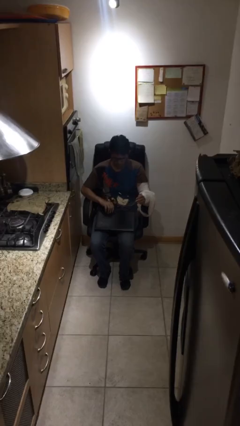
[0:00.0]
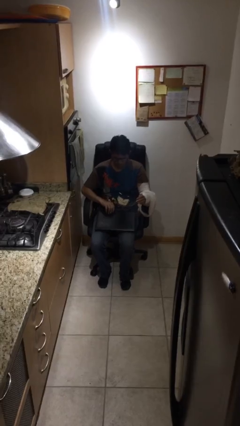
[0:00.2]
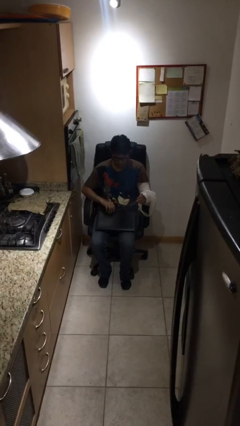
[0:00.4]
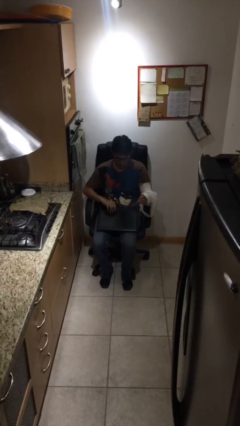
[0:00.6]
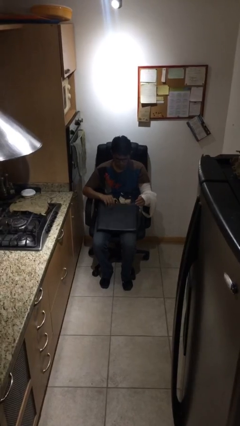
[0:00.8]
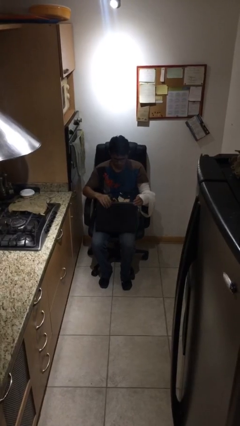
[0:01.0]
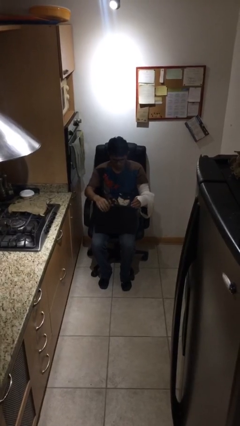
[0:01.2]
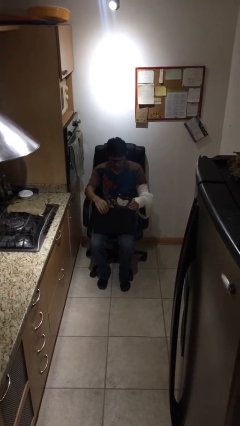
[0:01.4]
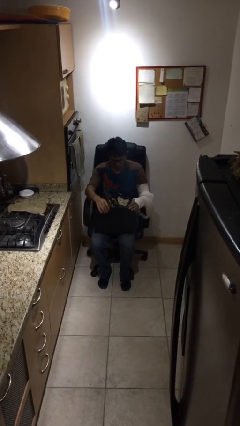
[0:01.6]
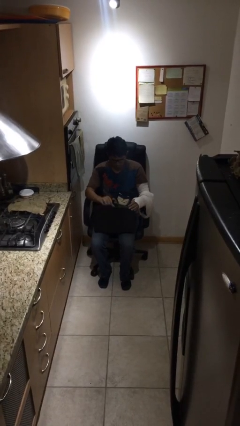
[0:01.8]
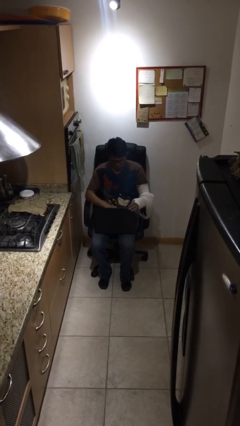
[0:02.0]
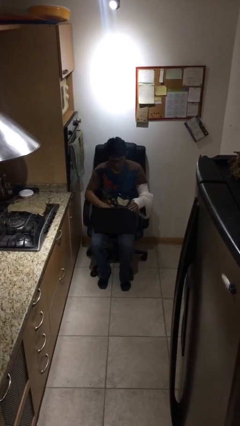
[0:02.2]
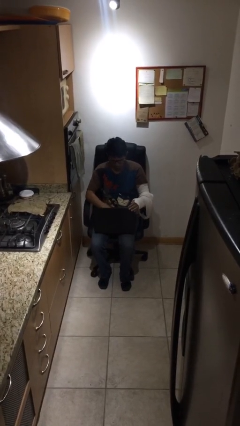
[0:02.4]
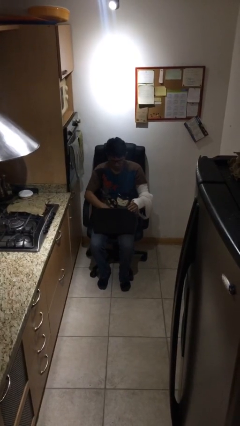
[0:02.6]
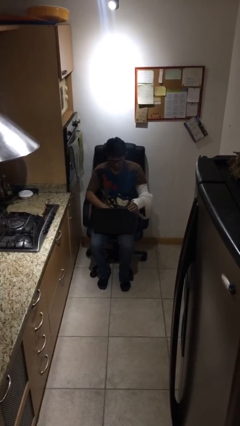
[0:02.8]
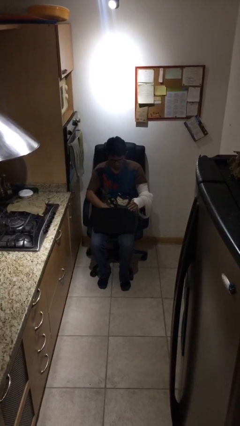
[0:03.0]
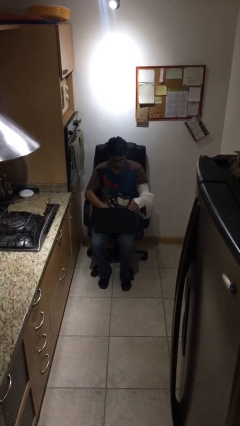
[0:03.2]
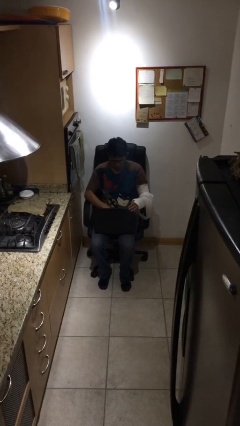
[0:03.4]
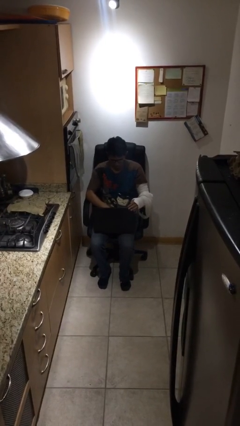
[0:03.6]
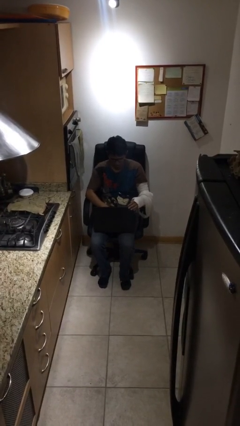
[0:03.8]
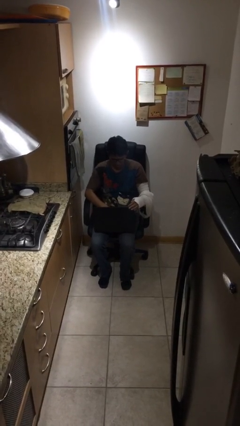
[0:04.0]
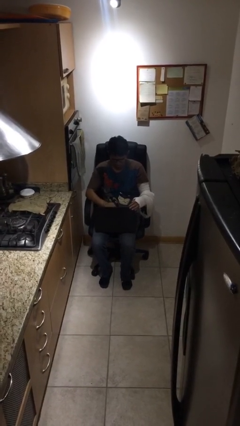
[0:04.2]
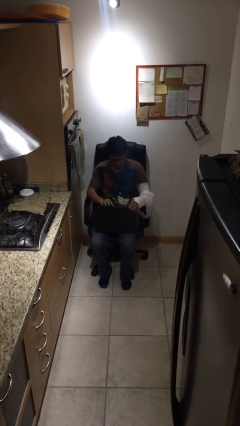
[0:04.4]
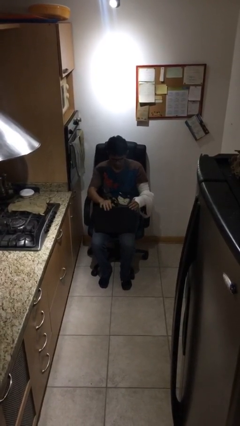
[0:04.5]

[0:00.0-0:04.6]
person interacts with laptop

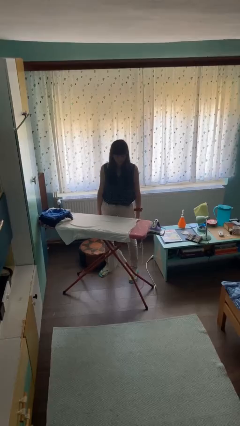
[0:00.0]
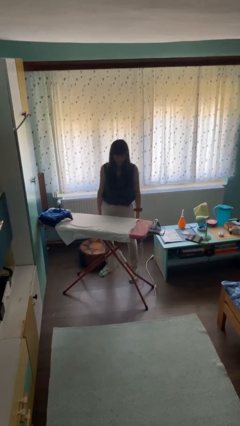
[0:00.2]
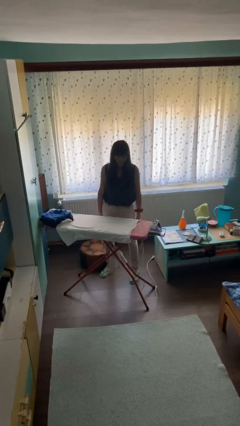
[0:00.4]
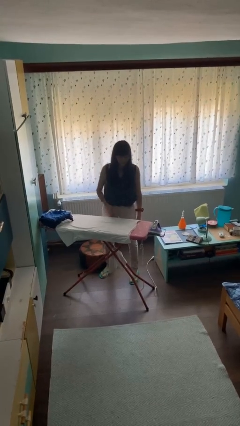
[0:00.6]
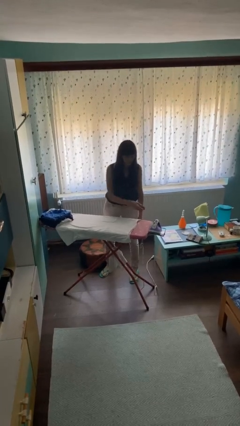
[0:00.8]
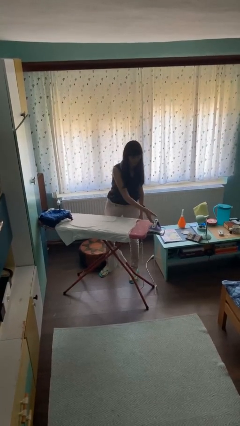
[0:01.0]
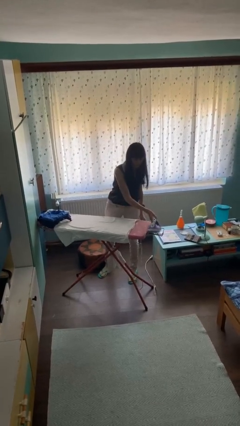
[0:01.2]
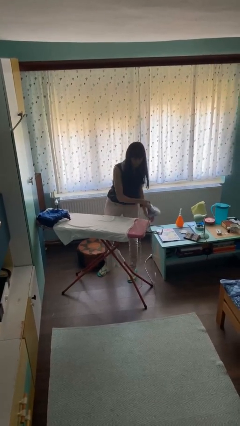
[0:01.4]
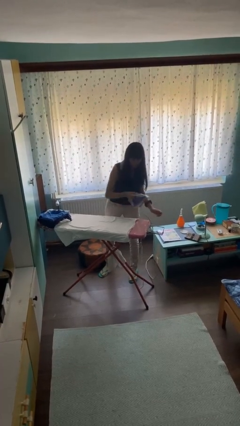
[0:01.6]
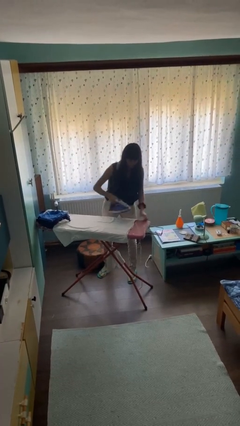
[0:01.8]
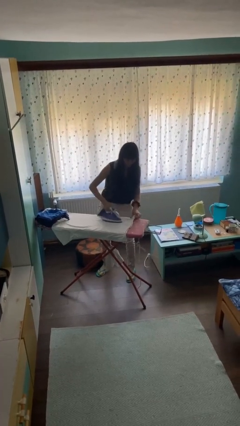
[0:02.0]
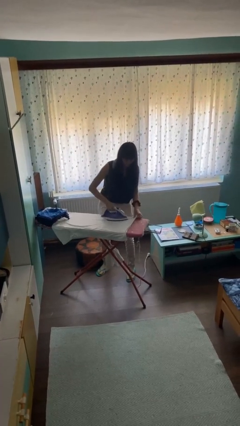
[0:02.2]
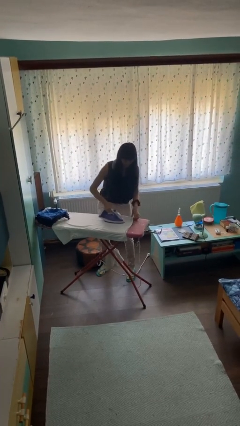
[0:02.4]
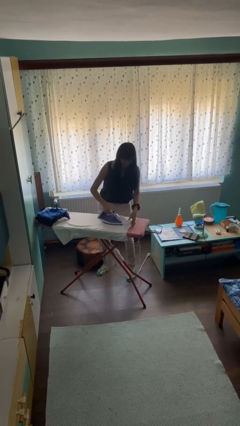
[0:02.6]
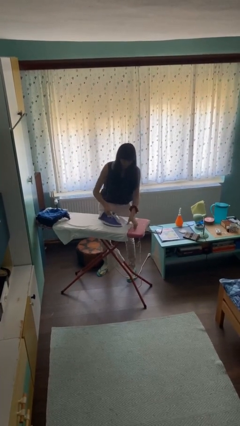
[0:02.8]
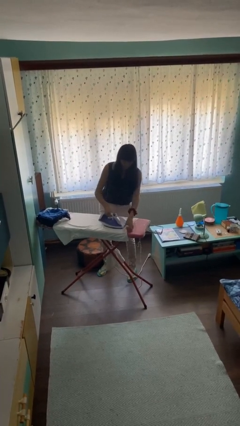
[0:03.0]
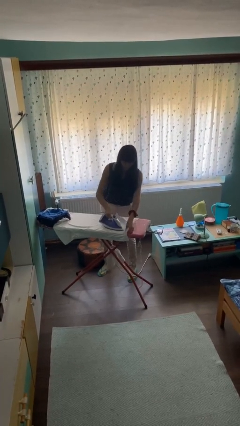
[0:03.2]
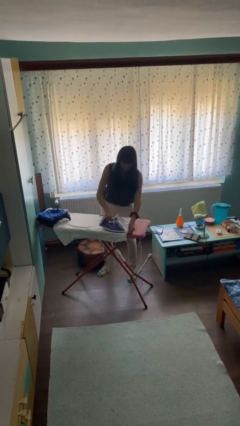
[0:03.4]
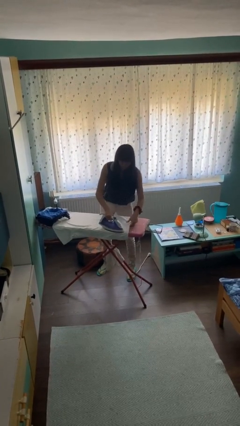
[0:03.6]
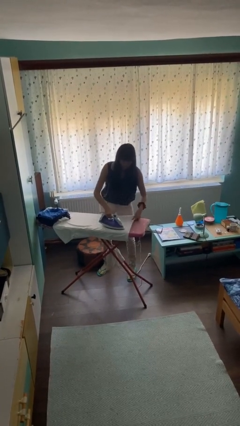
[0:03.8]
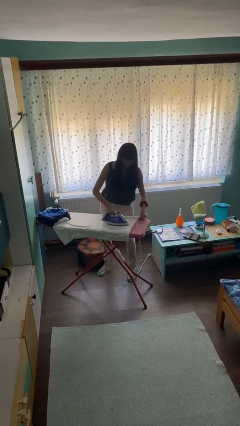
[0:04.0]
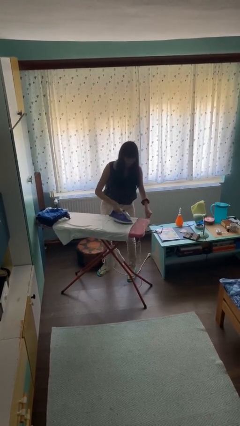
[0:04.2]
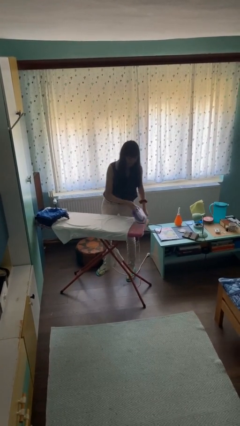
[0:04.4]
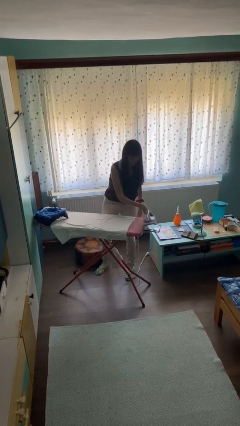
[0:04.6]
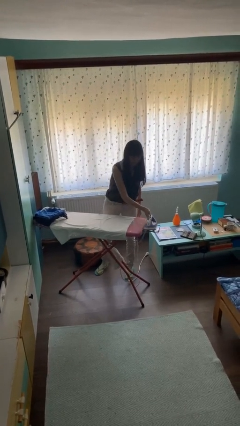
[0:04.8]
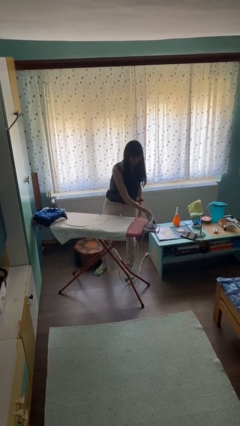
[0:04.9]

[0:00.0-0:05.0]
person irons clothes

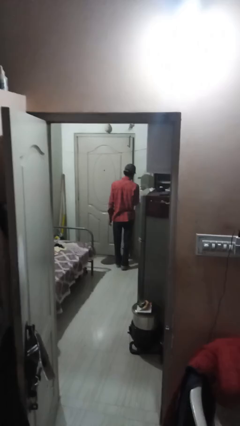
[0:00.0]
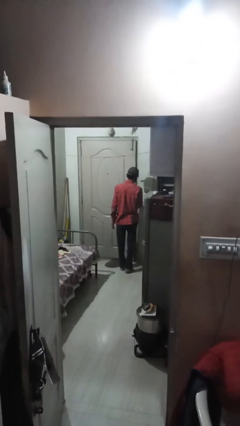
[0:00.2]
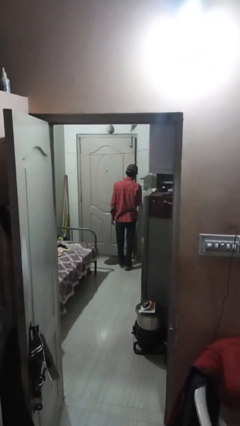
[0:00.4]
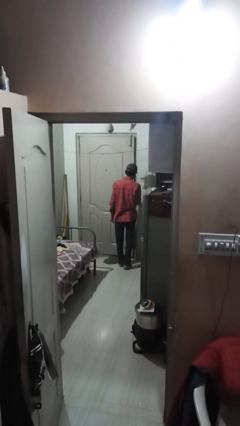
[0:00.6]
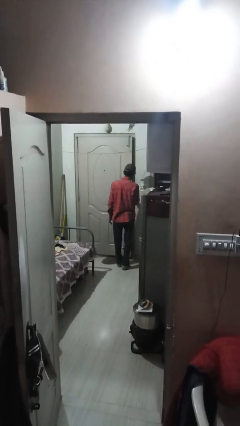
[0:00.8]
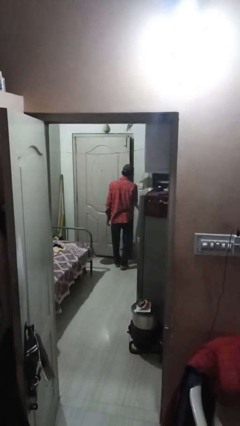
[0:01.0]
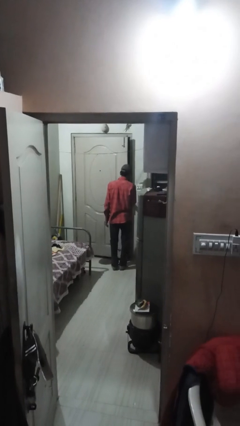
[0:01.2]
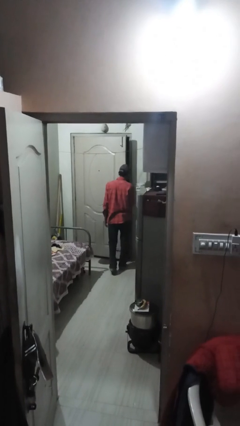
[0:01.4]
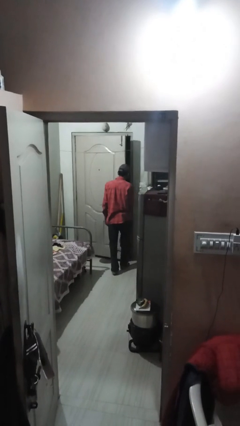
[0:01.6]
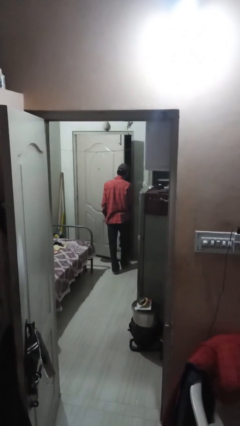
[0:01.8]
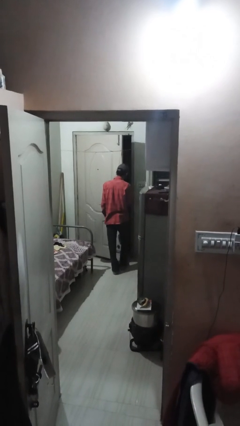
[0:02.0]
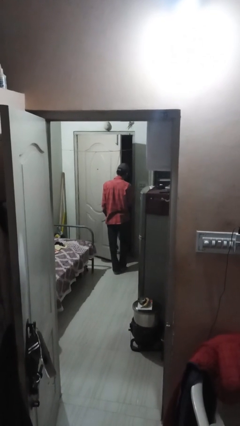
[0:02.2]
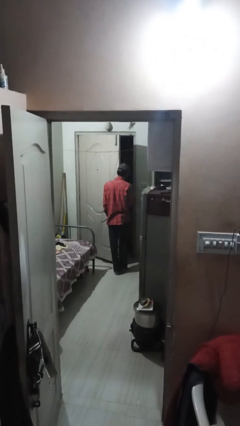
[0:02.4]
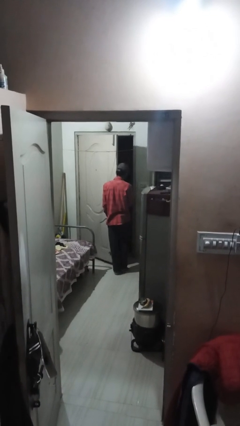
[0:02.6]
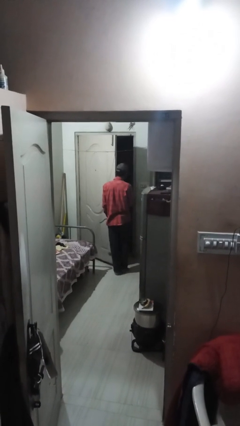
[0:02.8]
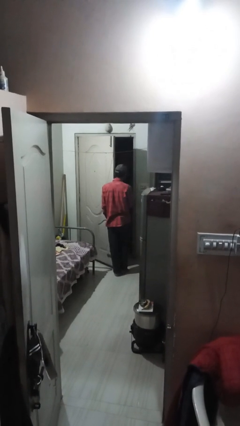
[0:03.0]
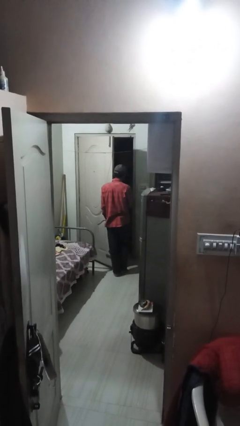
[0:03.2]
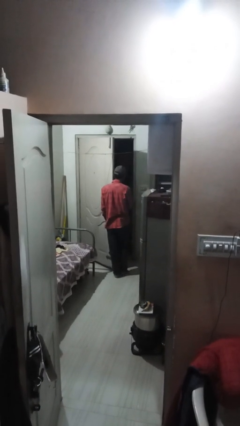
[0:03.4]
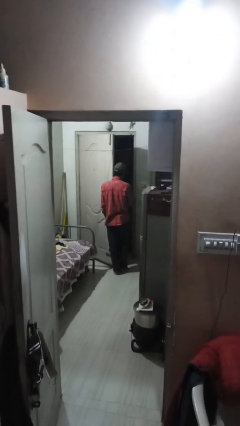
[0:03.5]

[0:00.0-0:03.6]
person opens facility door

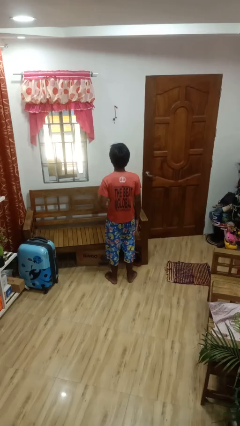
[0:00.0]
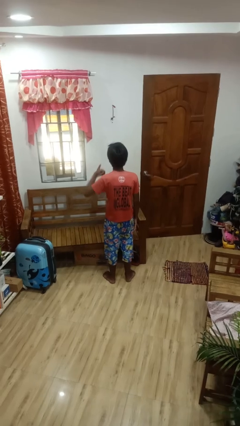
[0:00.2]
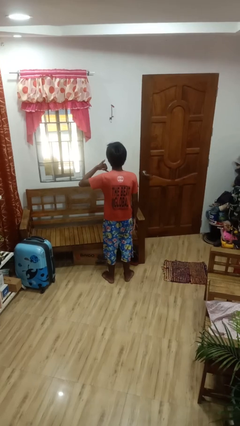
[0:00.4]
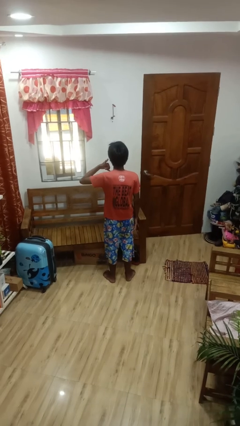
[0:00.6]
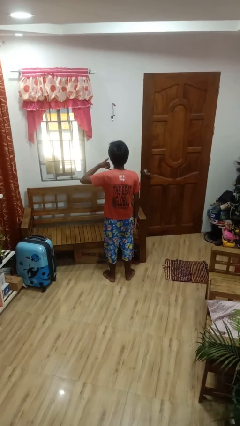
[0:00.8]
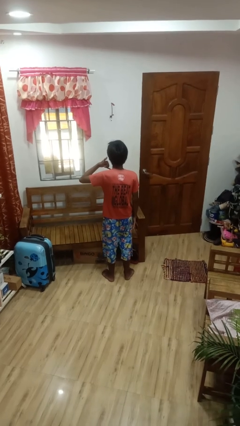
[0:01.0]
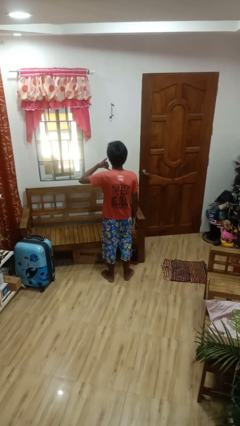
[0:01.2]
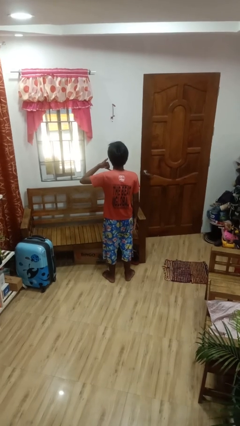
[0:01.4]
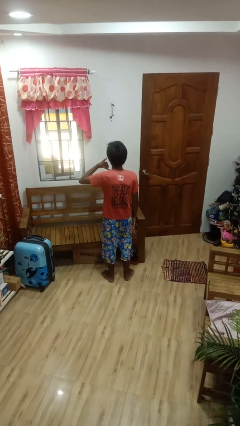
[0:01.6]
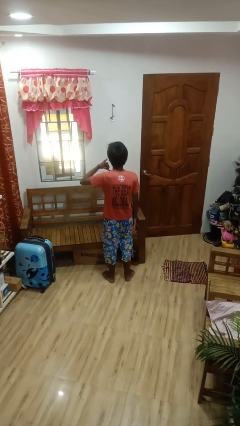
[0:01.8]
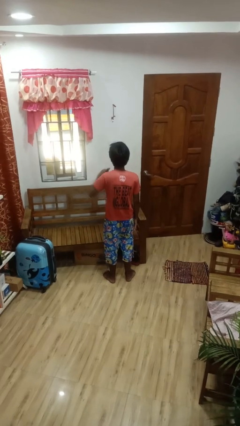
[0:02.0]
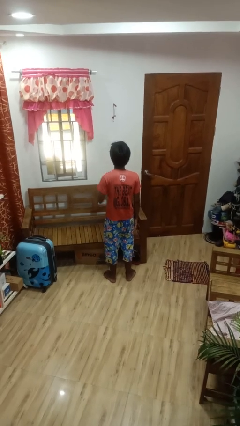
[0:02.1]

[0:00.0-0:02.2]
person gestures call me

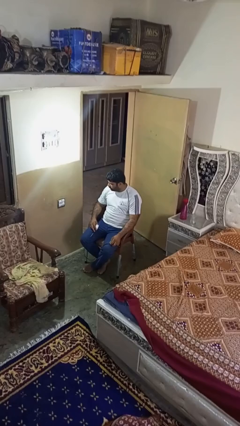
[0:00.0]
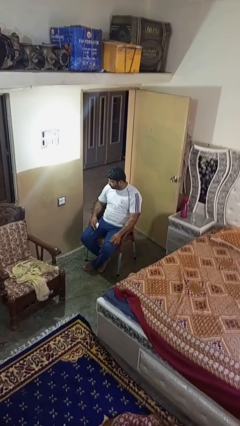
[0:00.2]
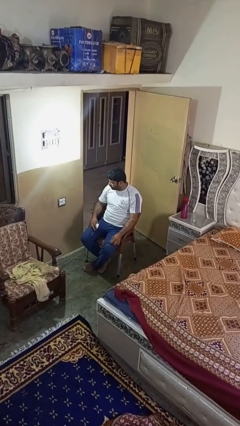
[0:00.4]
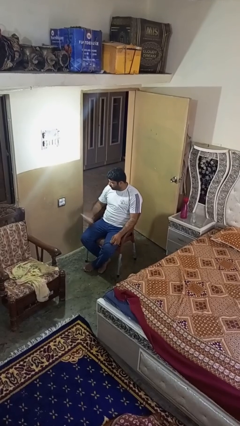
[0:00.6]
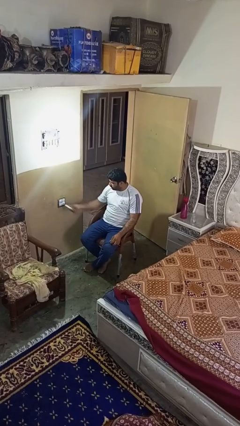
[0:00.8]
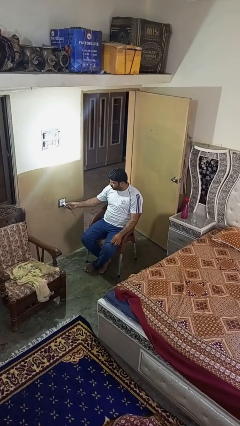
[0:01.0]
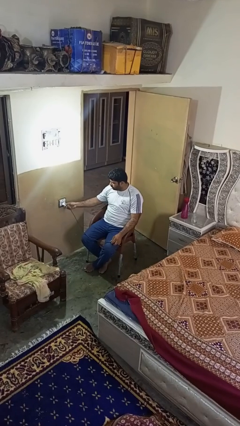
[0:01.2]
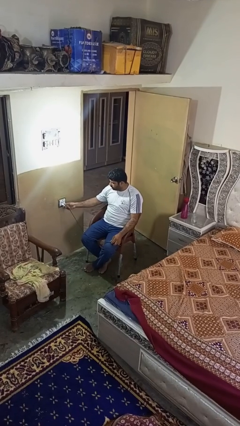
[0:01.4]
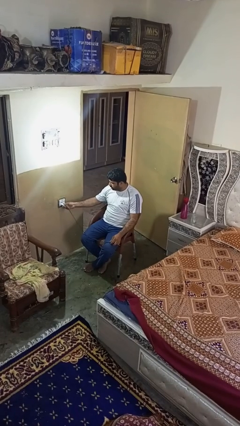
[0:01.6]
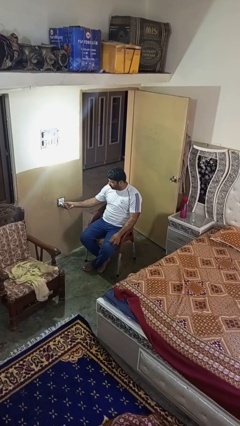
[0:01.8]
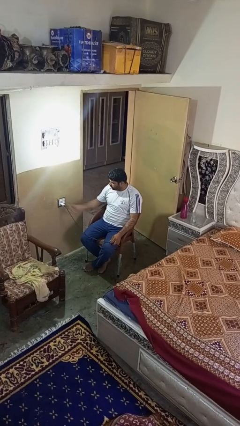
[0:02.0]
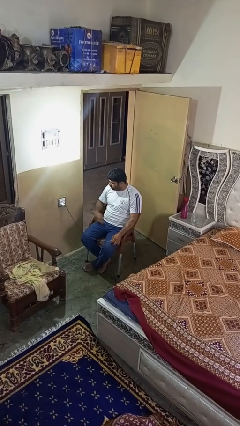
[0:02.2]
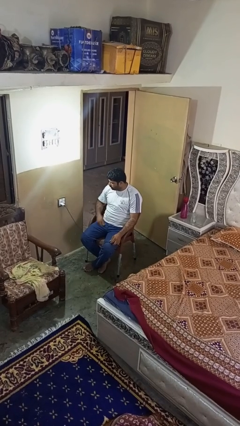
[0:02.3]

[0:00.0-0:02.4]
person plugs into electrical socket

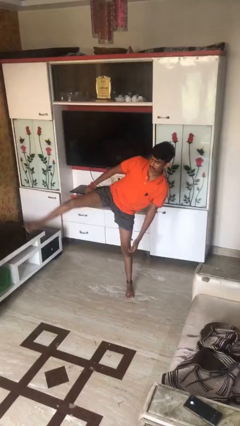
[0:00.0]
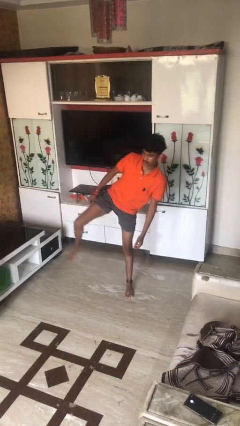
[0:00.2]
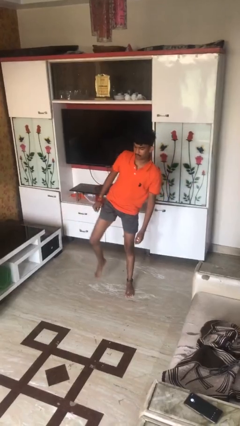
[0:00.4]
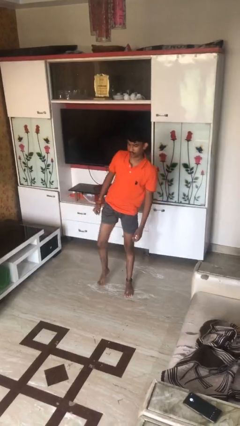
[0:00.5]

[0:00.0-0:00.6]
person karate kicks
